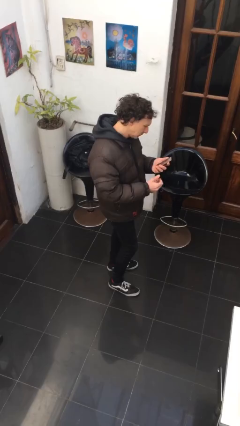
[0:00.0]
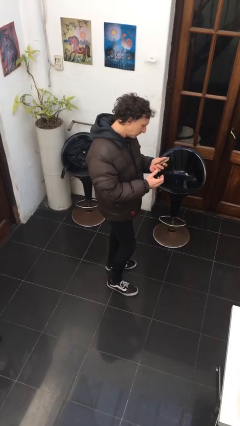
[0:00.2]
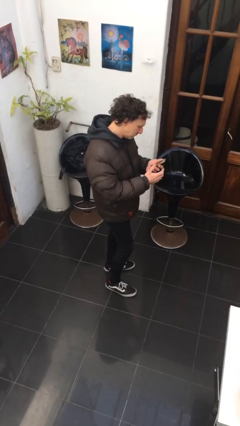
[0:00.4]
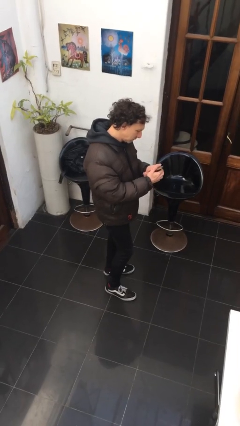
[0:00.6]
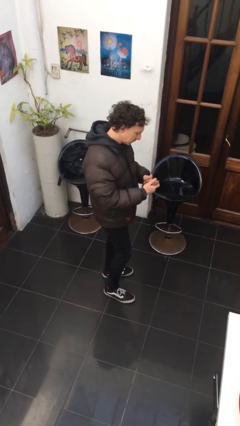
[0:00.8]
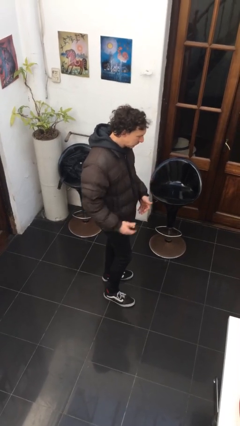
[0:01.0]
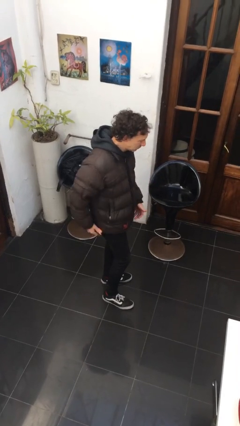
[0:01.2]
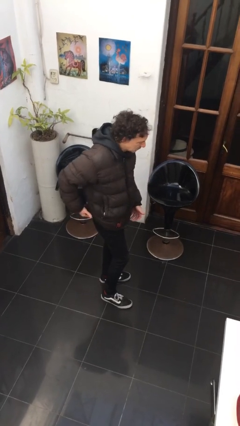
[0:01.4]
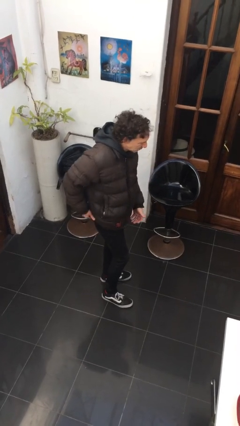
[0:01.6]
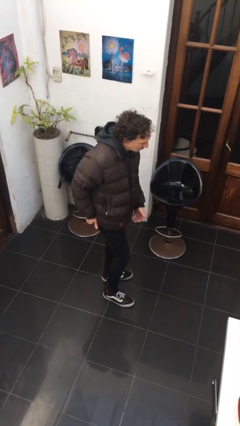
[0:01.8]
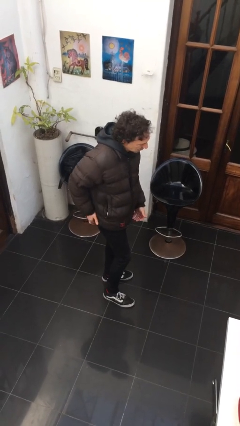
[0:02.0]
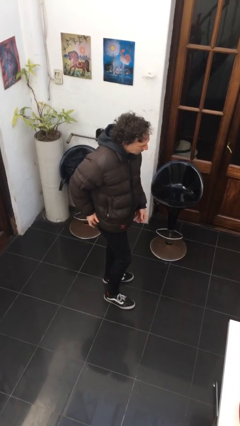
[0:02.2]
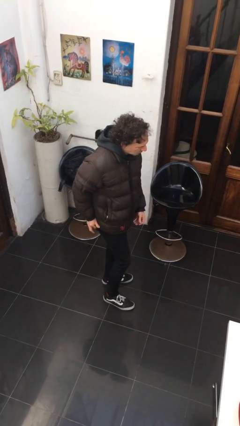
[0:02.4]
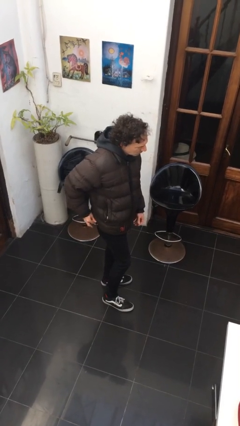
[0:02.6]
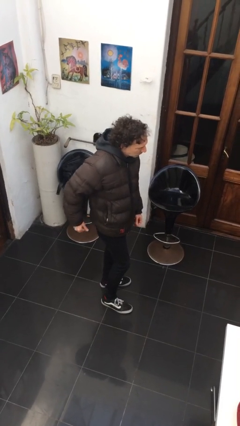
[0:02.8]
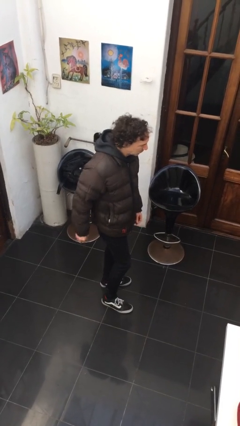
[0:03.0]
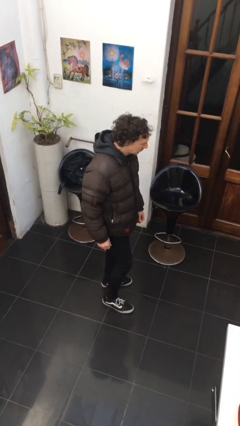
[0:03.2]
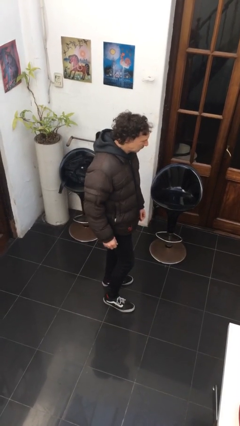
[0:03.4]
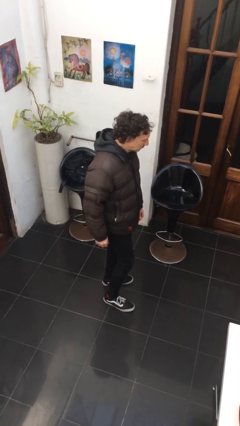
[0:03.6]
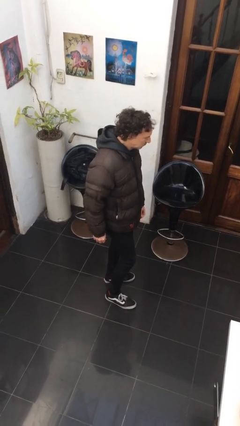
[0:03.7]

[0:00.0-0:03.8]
person puts phone into pocket

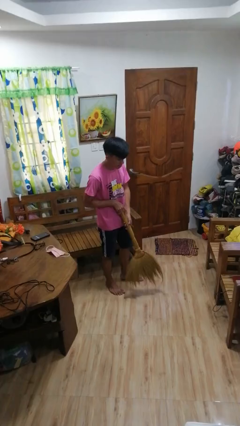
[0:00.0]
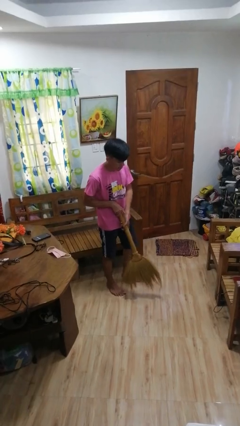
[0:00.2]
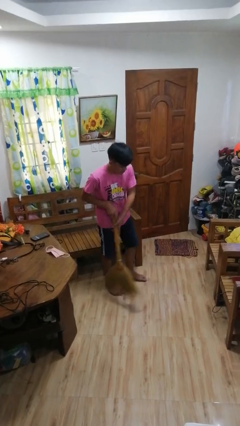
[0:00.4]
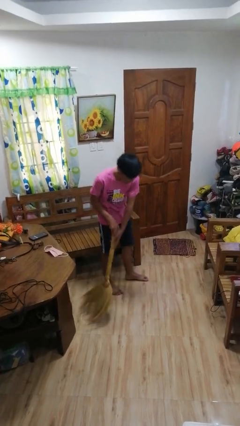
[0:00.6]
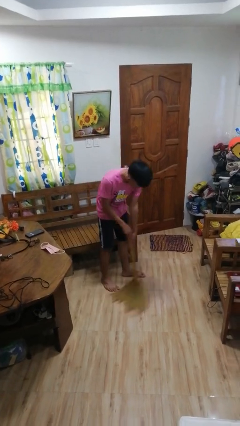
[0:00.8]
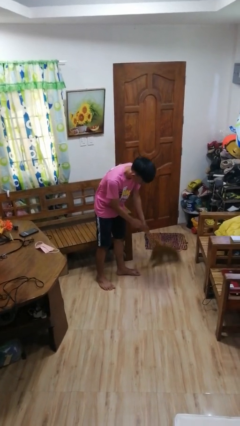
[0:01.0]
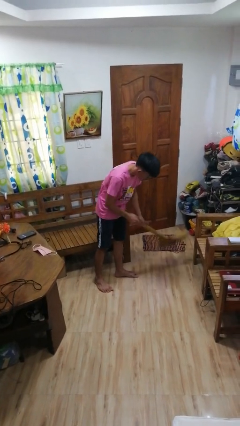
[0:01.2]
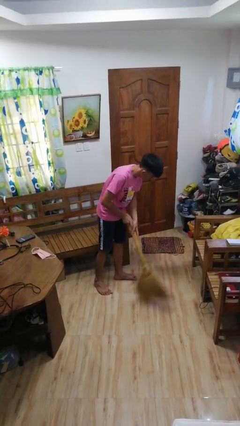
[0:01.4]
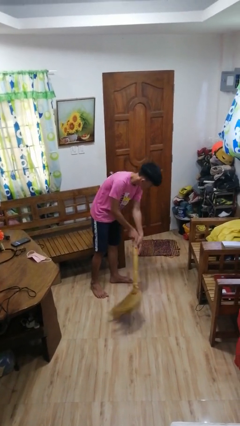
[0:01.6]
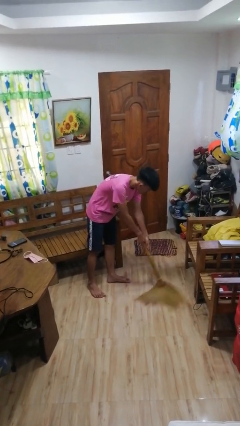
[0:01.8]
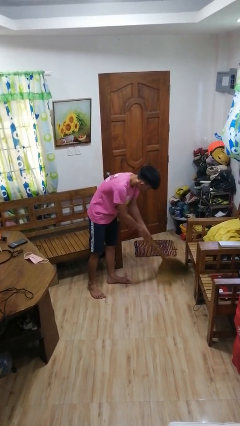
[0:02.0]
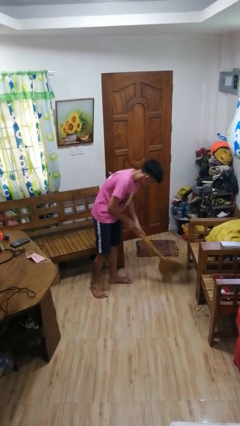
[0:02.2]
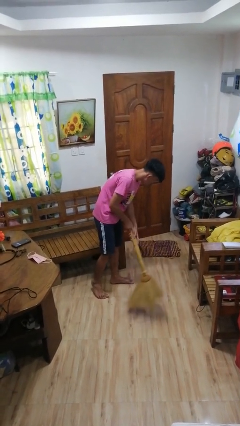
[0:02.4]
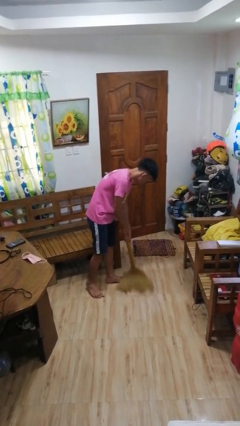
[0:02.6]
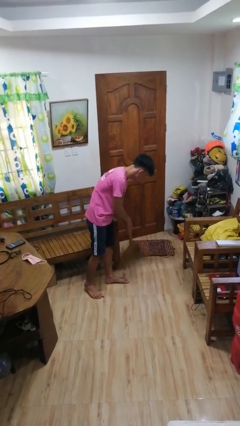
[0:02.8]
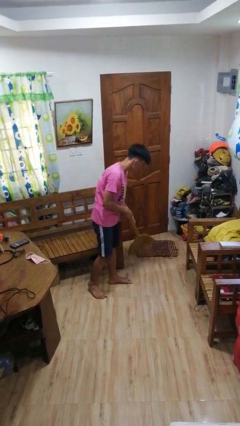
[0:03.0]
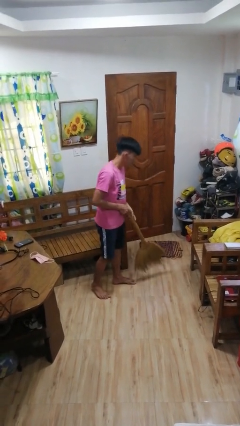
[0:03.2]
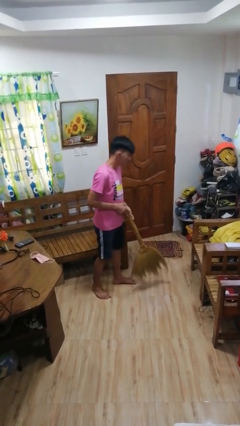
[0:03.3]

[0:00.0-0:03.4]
person sweeps floor

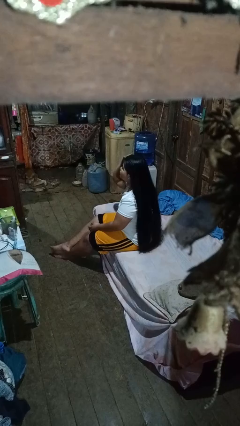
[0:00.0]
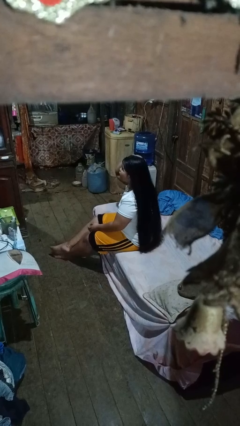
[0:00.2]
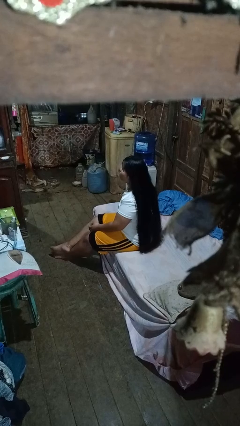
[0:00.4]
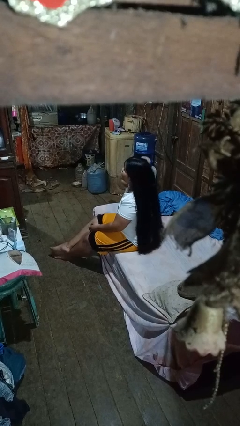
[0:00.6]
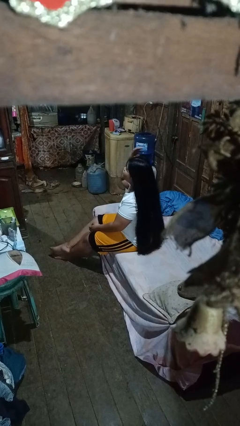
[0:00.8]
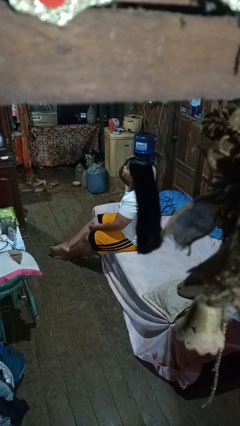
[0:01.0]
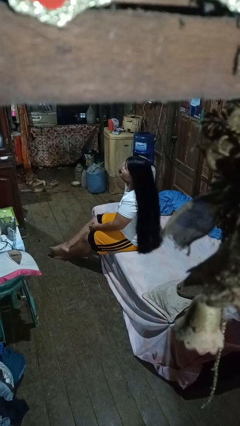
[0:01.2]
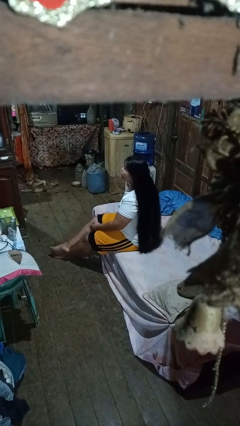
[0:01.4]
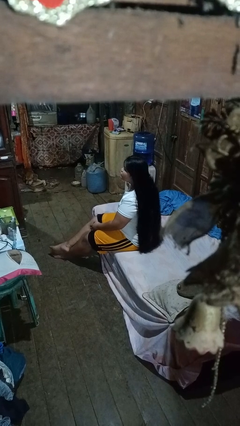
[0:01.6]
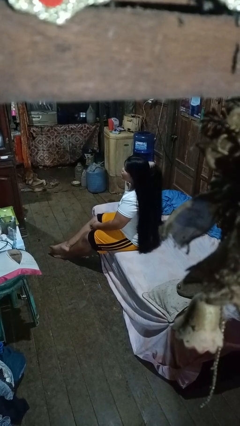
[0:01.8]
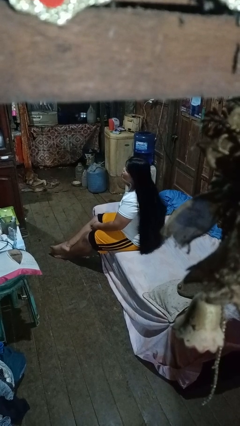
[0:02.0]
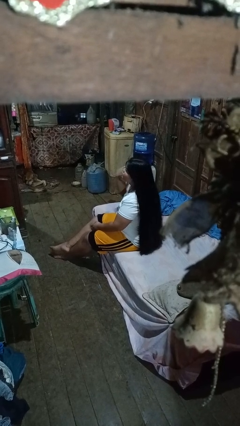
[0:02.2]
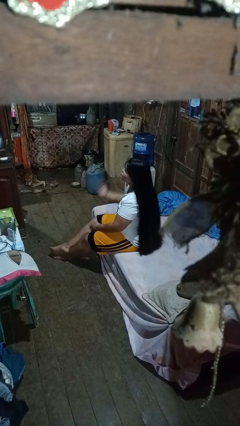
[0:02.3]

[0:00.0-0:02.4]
person strokes hair

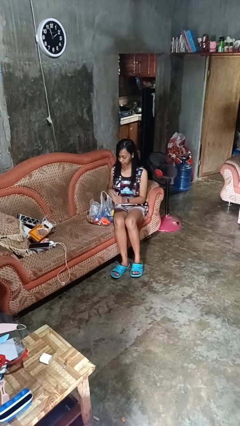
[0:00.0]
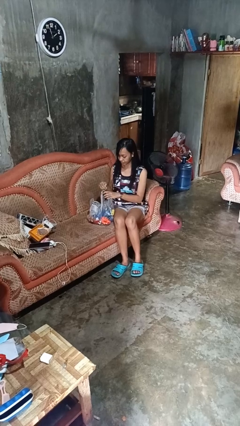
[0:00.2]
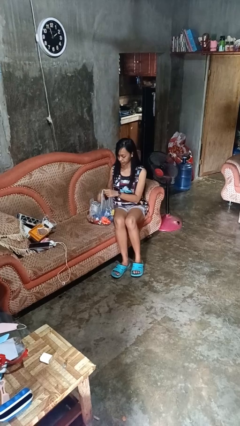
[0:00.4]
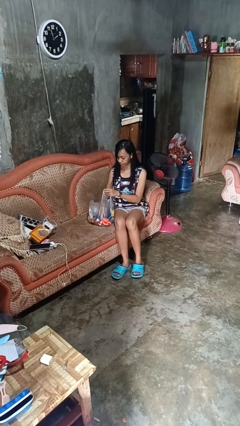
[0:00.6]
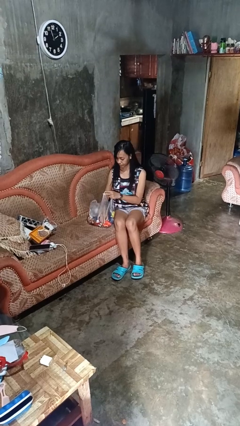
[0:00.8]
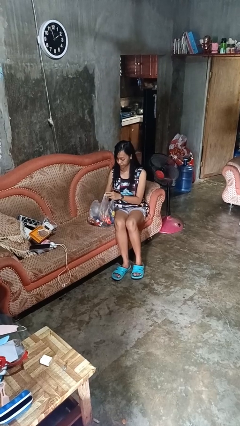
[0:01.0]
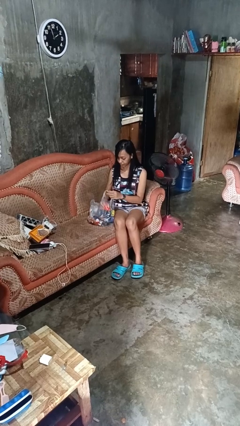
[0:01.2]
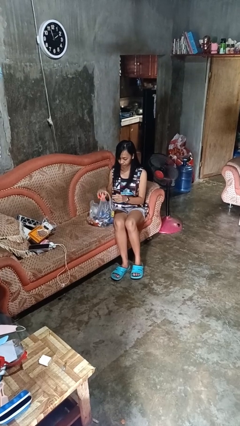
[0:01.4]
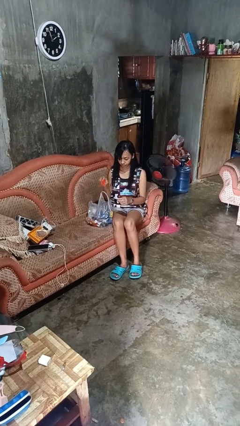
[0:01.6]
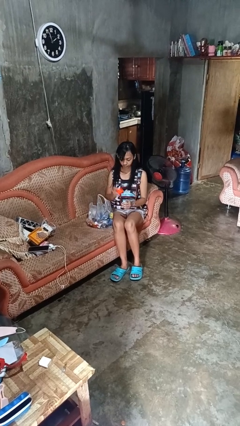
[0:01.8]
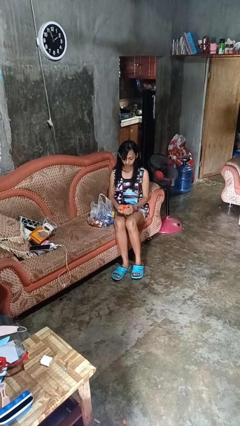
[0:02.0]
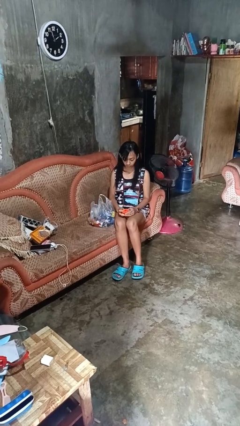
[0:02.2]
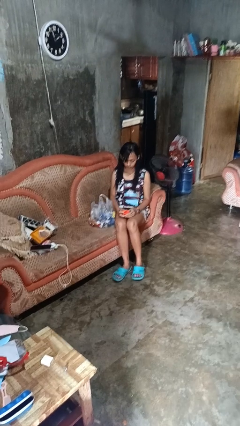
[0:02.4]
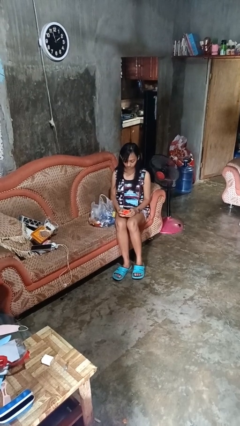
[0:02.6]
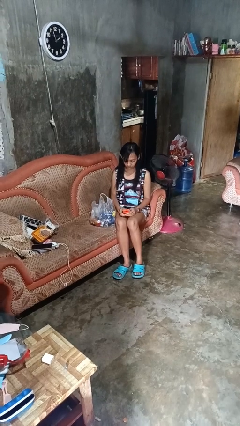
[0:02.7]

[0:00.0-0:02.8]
person takes object from bag

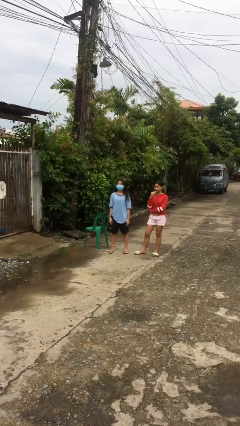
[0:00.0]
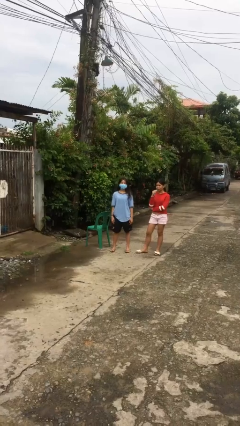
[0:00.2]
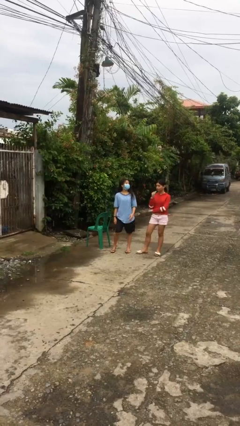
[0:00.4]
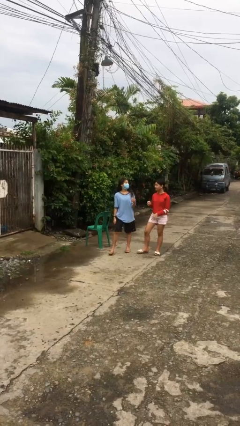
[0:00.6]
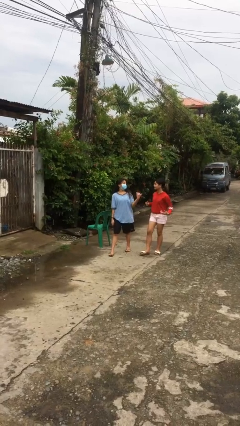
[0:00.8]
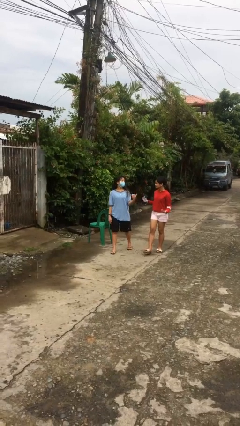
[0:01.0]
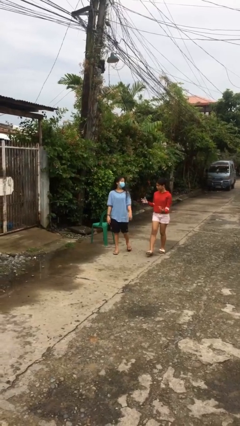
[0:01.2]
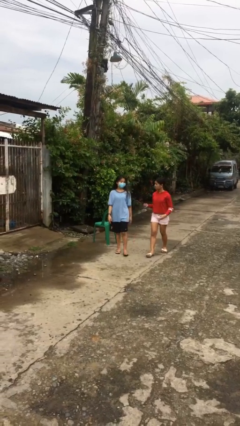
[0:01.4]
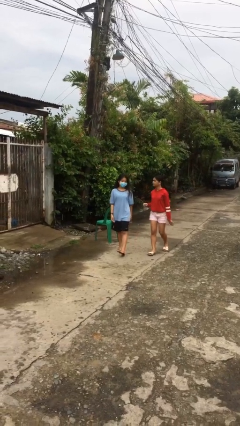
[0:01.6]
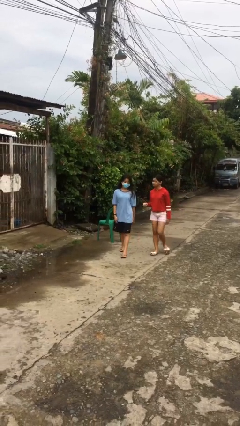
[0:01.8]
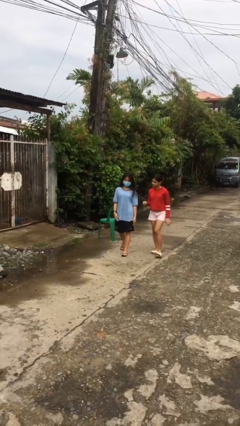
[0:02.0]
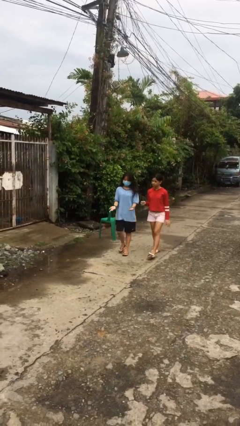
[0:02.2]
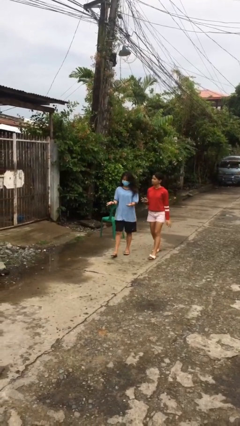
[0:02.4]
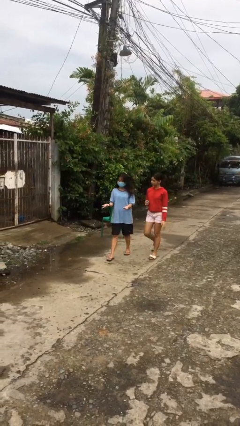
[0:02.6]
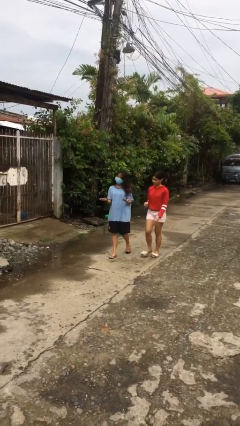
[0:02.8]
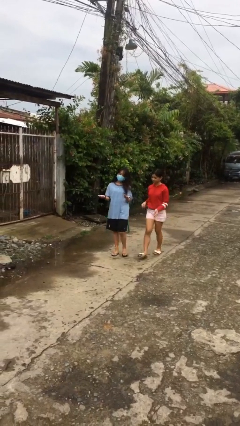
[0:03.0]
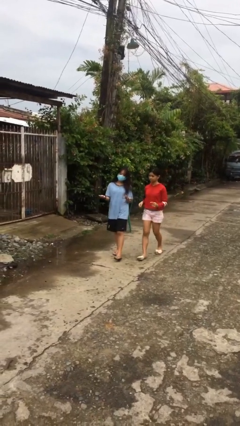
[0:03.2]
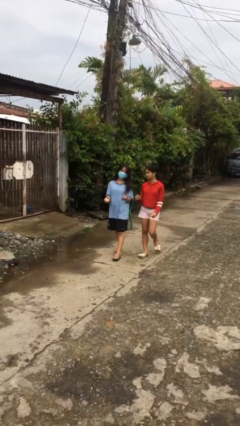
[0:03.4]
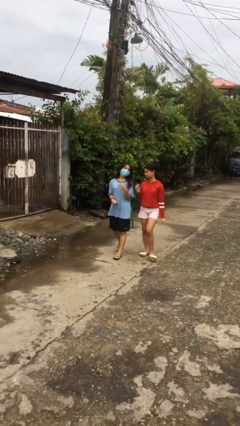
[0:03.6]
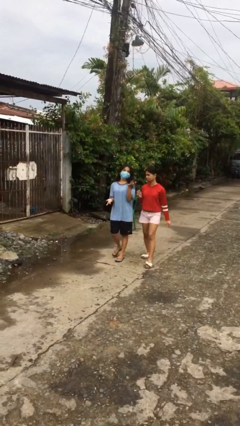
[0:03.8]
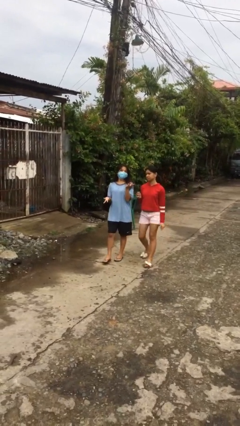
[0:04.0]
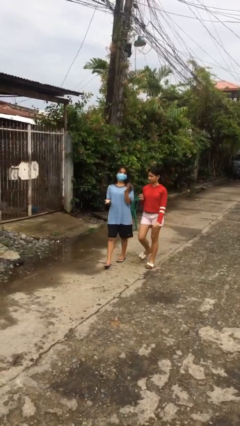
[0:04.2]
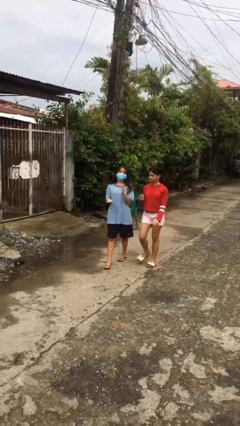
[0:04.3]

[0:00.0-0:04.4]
person talks to person

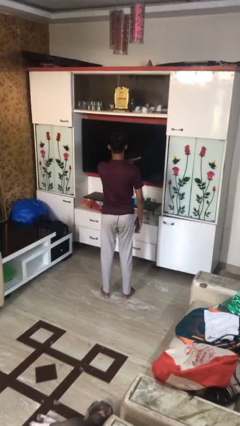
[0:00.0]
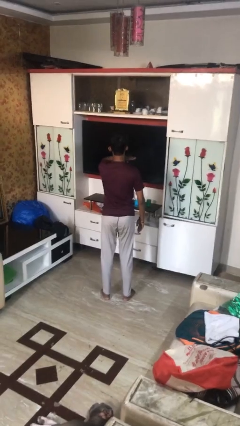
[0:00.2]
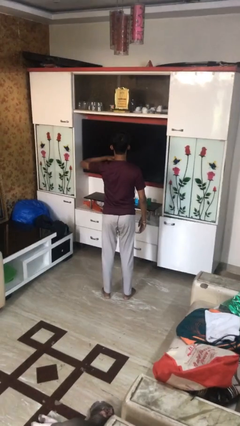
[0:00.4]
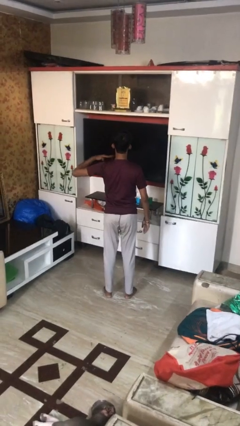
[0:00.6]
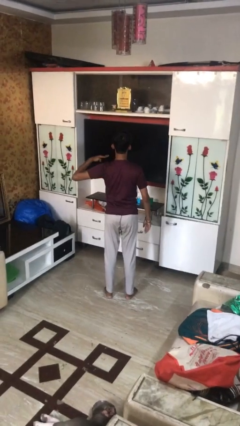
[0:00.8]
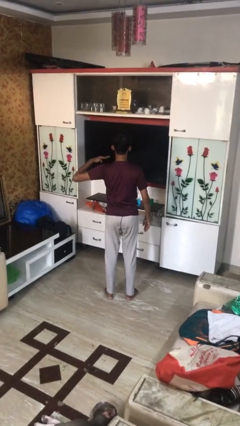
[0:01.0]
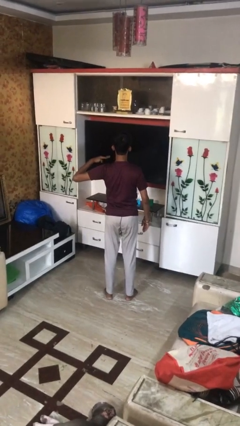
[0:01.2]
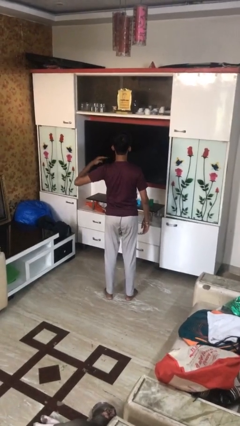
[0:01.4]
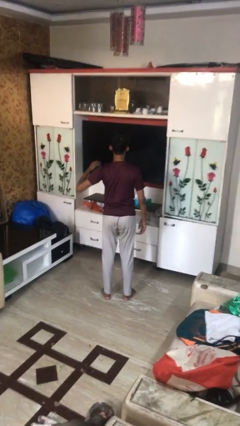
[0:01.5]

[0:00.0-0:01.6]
person gestures cut
